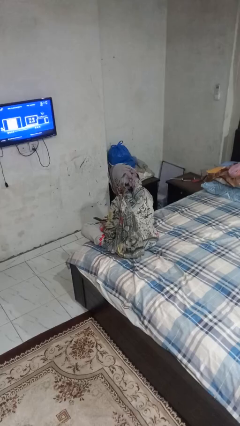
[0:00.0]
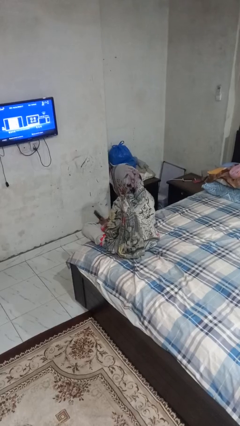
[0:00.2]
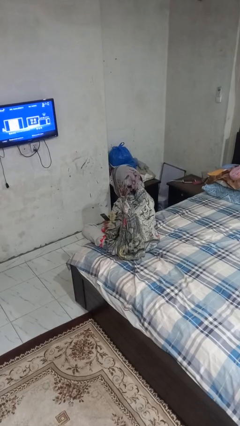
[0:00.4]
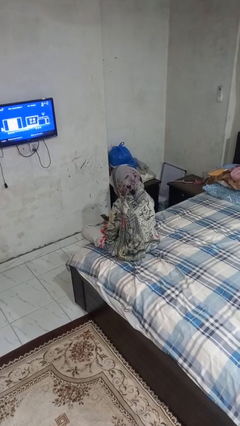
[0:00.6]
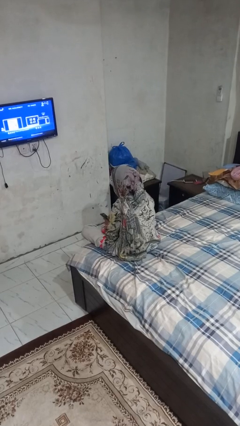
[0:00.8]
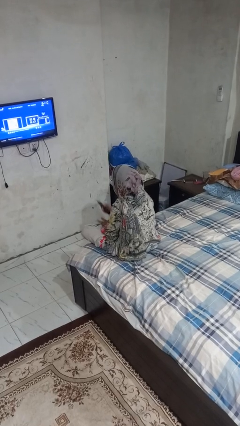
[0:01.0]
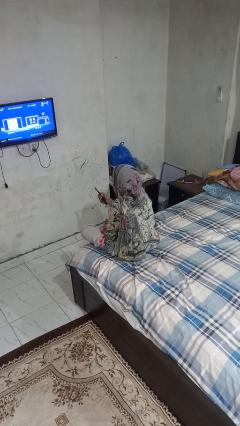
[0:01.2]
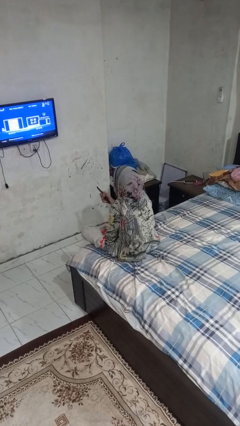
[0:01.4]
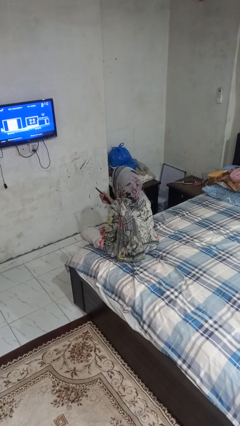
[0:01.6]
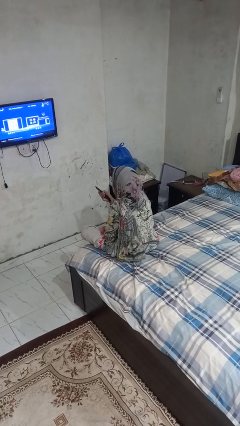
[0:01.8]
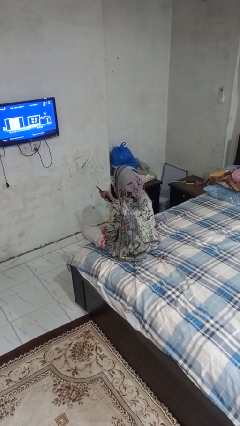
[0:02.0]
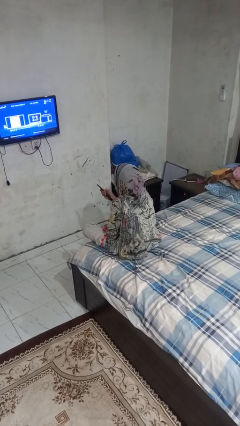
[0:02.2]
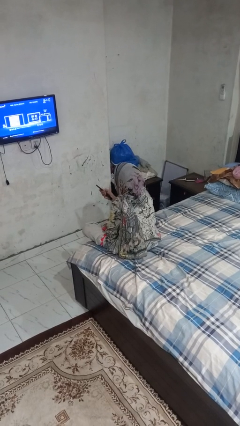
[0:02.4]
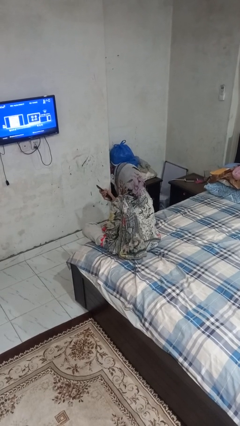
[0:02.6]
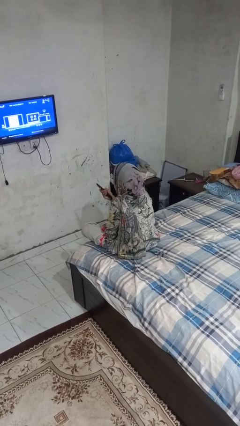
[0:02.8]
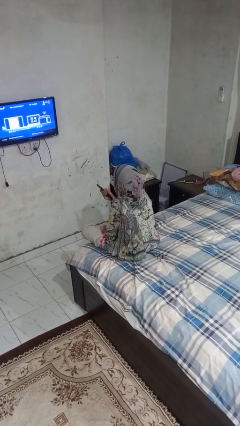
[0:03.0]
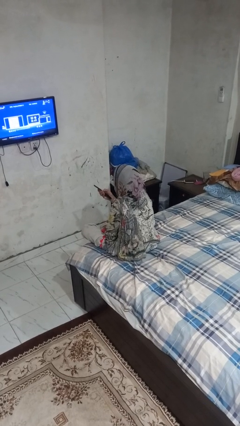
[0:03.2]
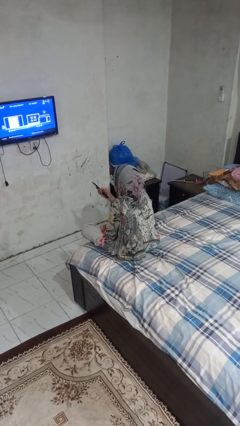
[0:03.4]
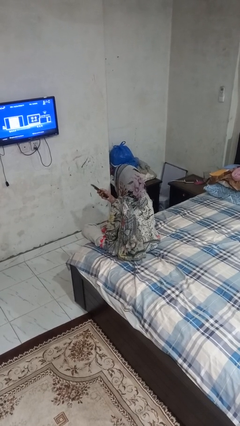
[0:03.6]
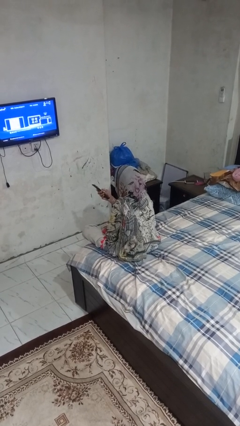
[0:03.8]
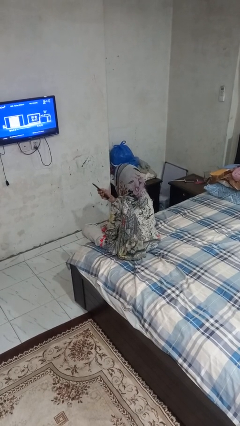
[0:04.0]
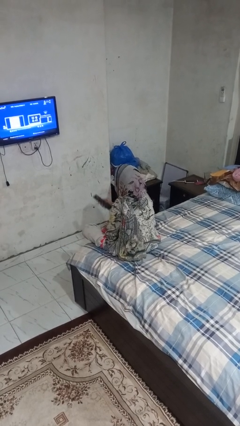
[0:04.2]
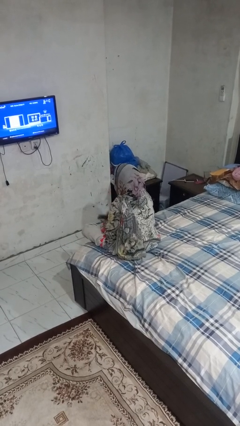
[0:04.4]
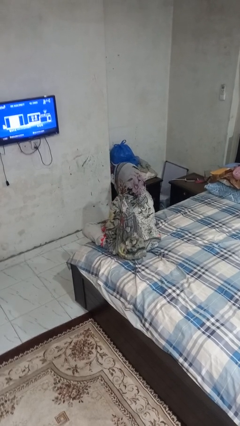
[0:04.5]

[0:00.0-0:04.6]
person uses television remote

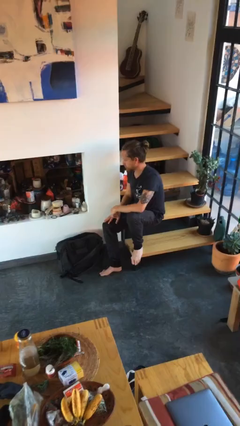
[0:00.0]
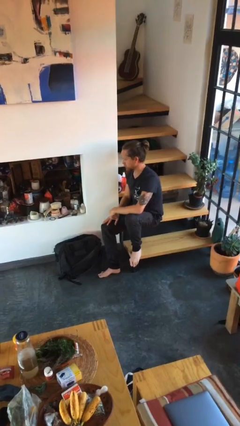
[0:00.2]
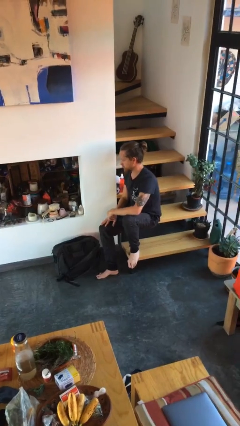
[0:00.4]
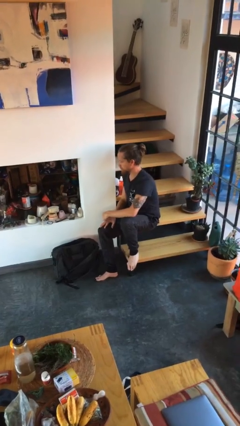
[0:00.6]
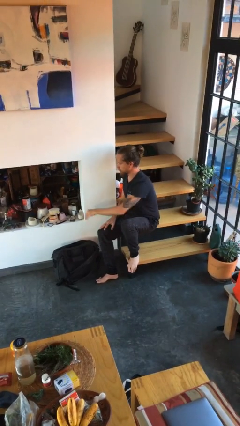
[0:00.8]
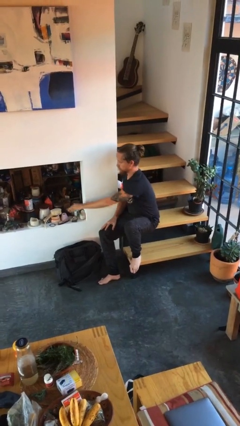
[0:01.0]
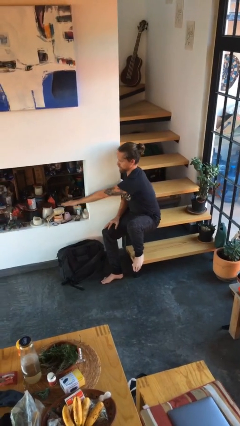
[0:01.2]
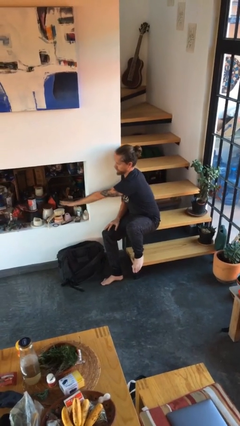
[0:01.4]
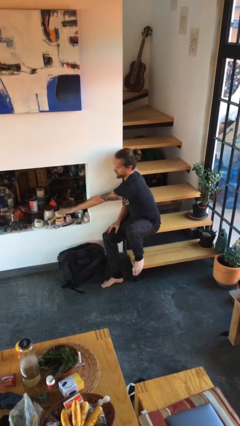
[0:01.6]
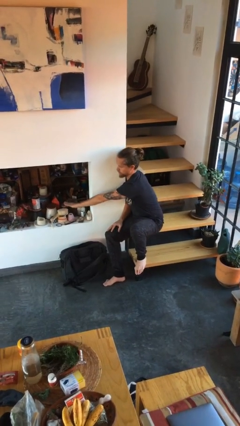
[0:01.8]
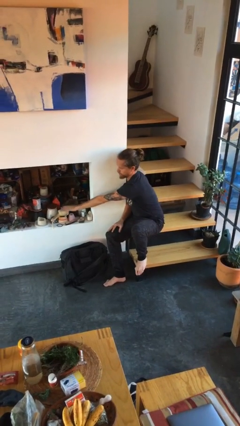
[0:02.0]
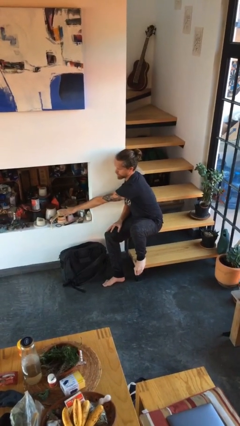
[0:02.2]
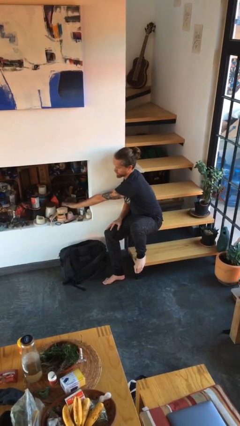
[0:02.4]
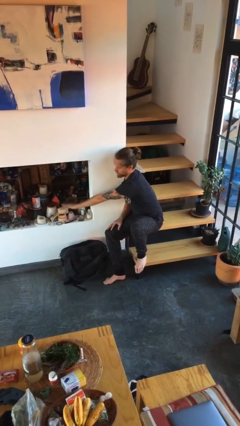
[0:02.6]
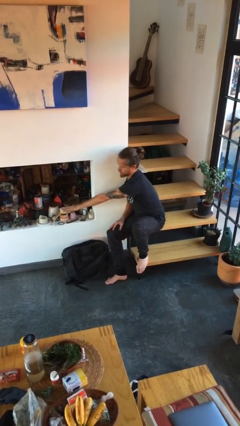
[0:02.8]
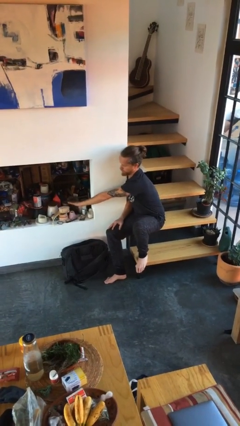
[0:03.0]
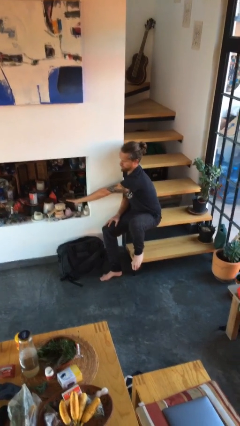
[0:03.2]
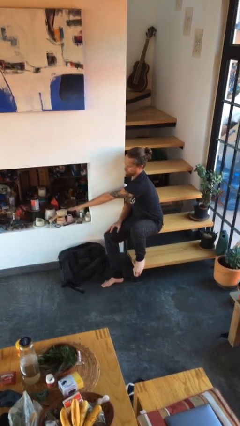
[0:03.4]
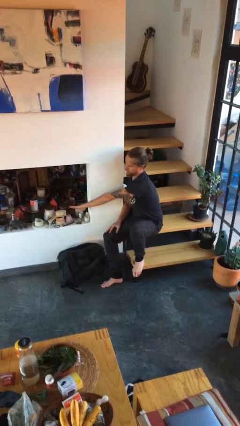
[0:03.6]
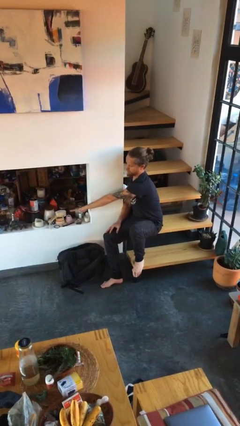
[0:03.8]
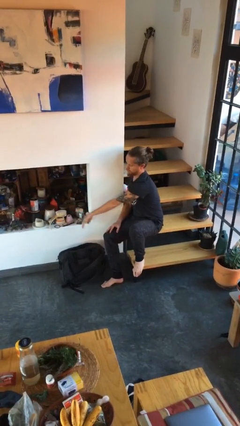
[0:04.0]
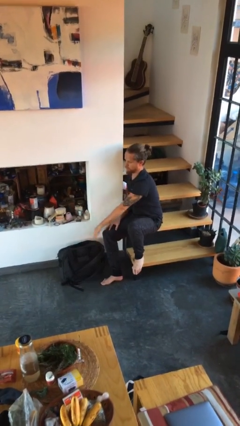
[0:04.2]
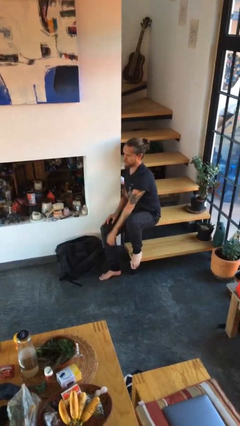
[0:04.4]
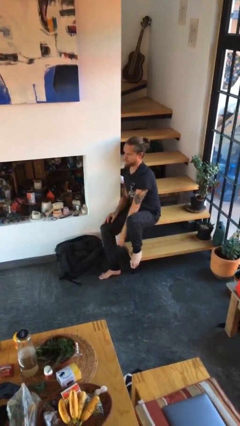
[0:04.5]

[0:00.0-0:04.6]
person waves hand over object

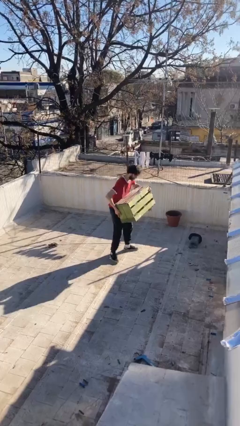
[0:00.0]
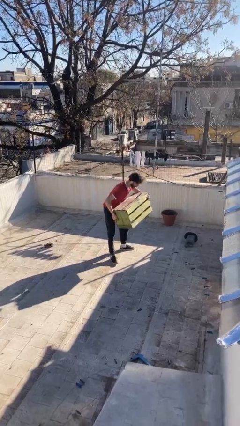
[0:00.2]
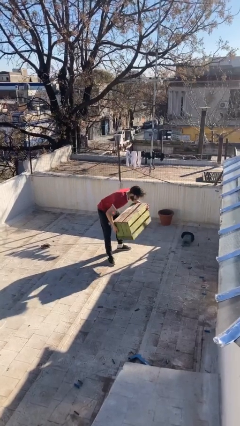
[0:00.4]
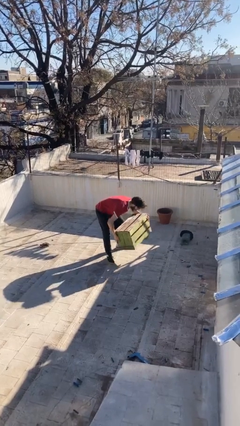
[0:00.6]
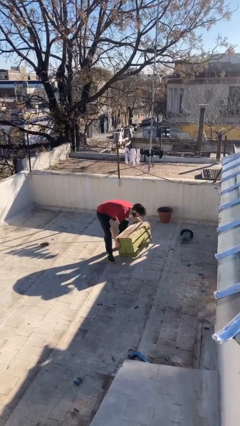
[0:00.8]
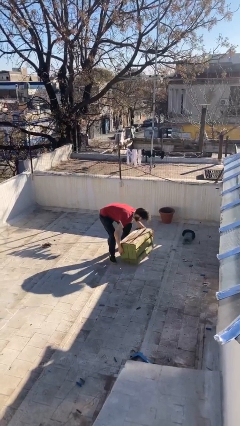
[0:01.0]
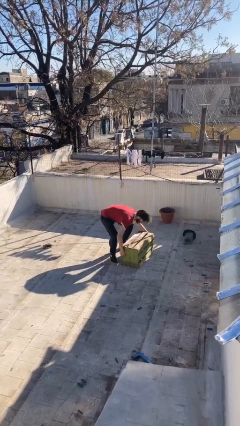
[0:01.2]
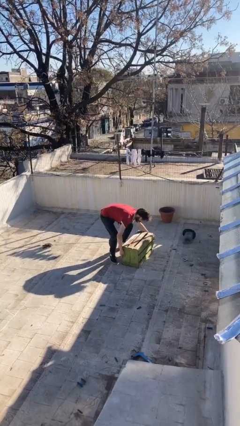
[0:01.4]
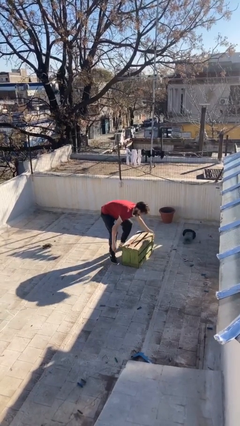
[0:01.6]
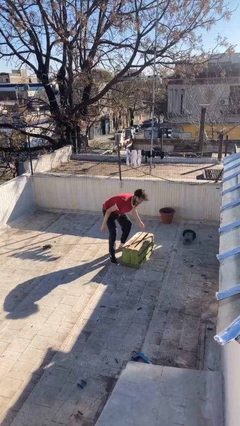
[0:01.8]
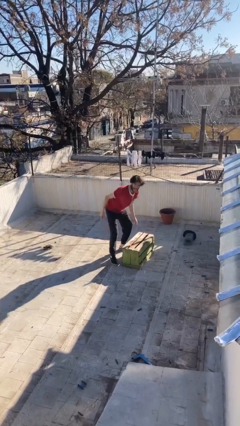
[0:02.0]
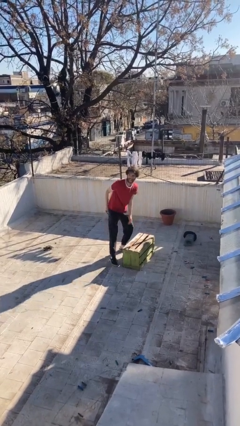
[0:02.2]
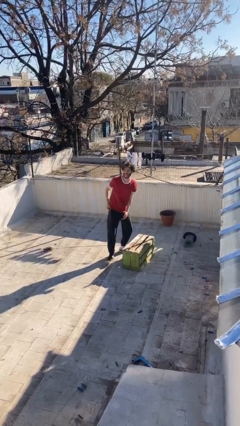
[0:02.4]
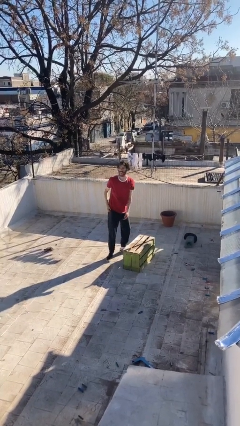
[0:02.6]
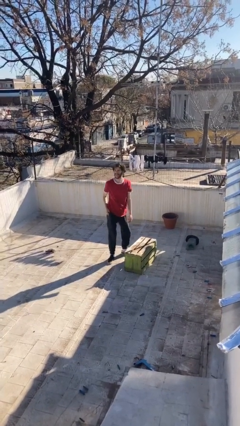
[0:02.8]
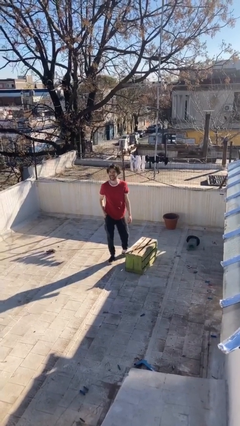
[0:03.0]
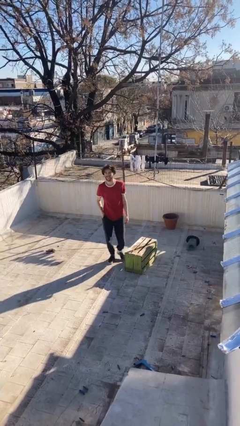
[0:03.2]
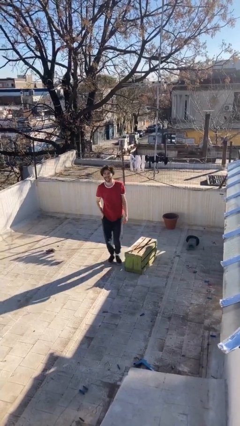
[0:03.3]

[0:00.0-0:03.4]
person puts down object on floor

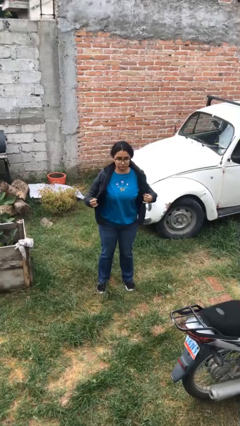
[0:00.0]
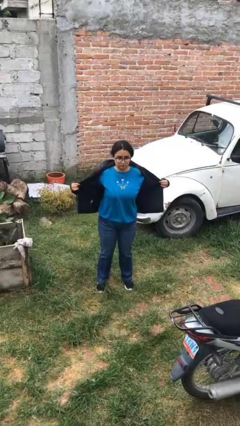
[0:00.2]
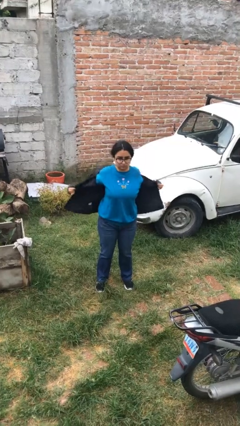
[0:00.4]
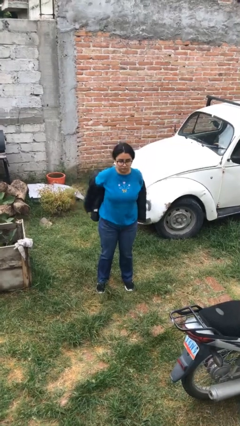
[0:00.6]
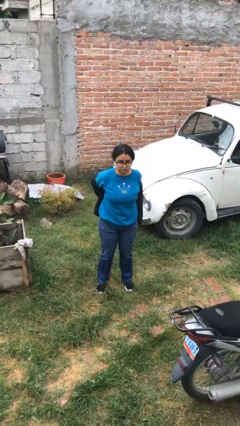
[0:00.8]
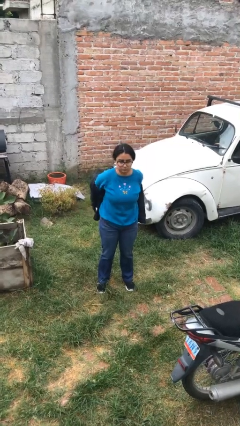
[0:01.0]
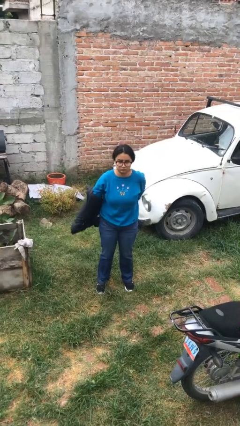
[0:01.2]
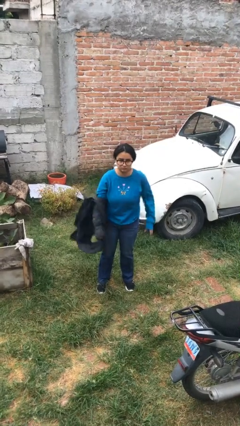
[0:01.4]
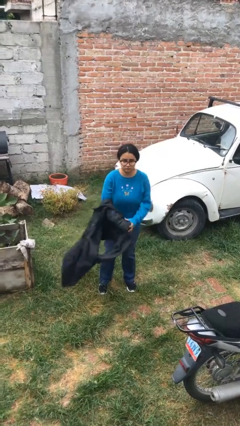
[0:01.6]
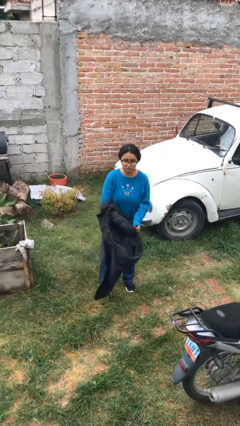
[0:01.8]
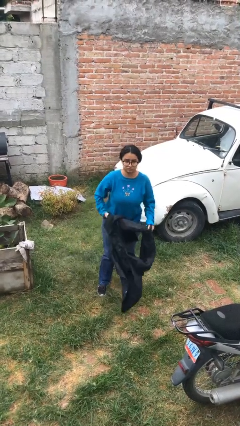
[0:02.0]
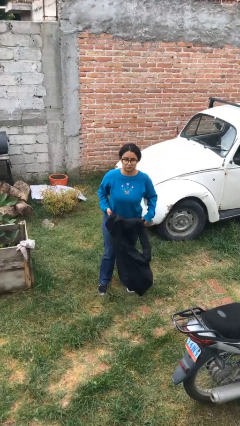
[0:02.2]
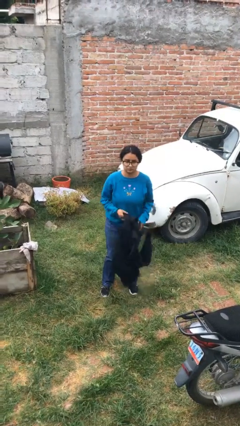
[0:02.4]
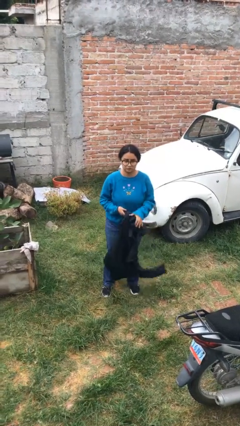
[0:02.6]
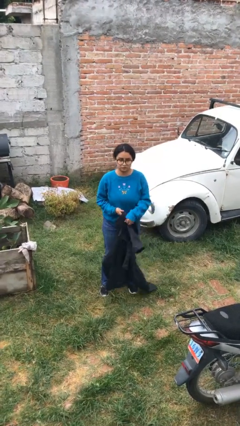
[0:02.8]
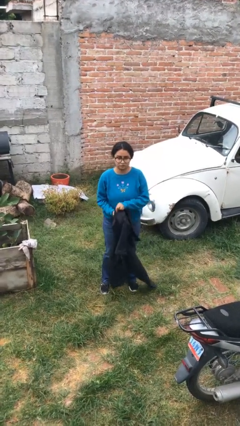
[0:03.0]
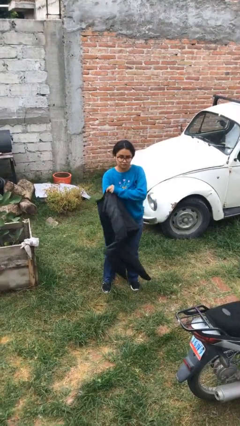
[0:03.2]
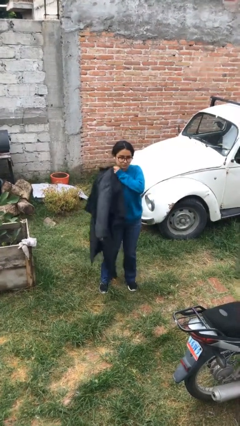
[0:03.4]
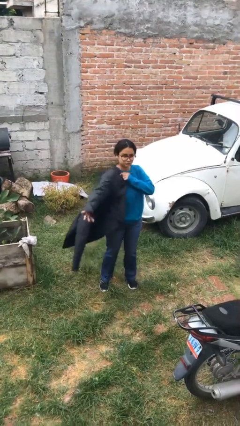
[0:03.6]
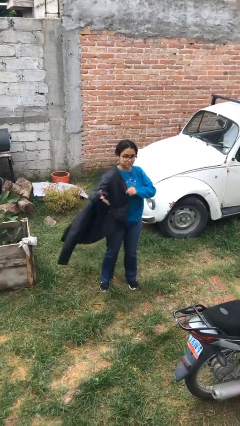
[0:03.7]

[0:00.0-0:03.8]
person takes off jacket

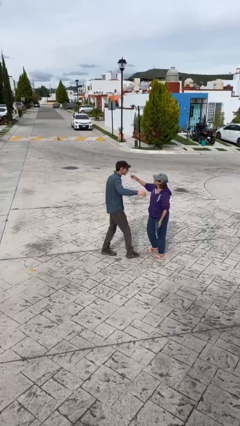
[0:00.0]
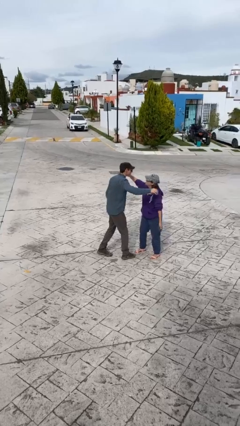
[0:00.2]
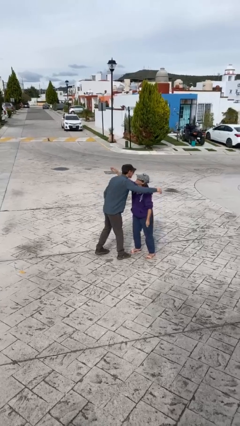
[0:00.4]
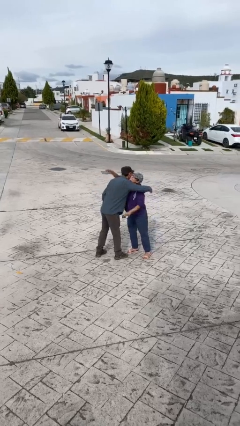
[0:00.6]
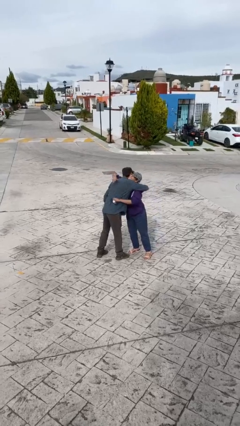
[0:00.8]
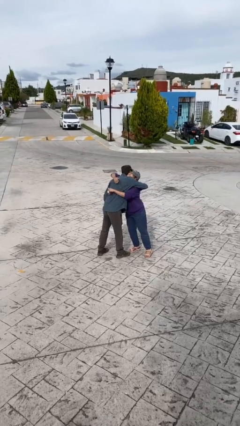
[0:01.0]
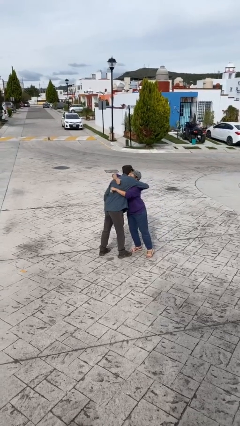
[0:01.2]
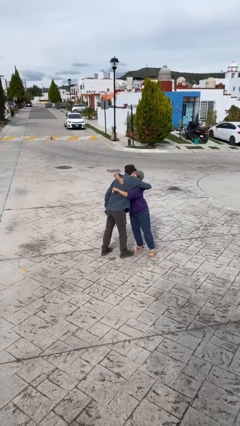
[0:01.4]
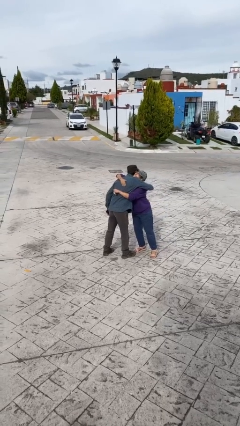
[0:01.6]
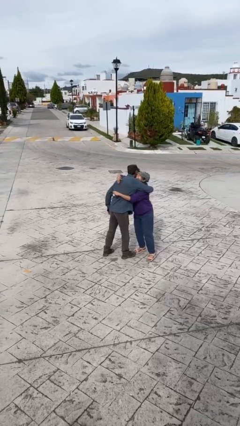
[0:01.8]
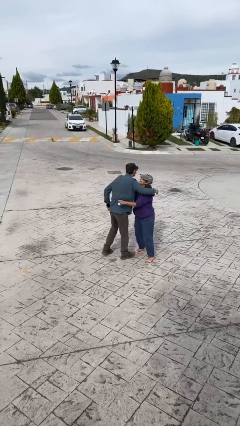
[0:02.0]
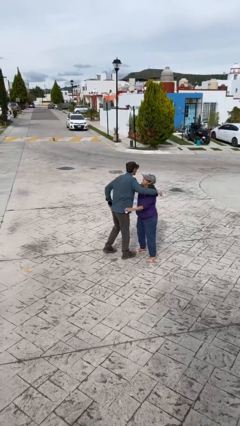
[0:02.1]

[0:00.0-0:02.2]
person embraces person
